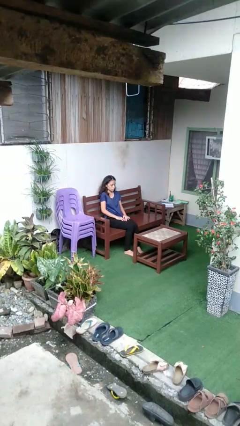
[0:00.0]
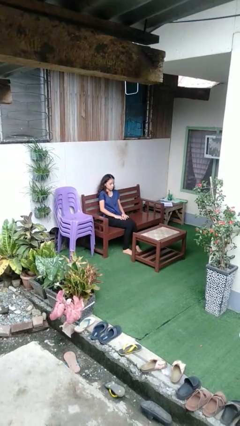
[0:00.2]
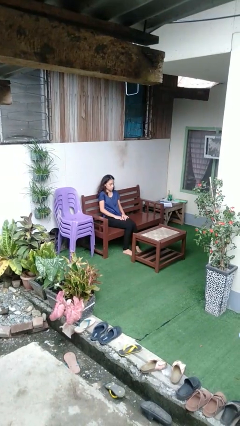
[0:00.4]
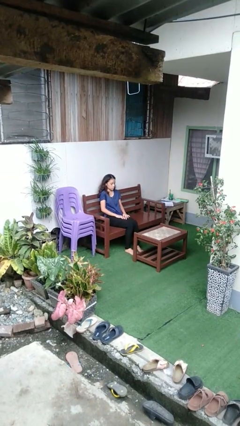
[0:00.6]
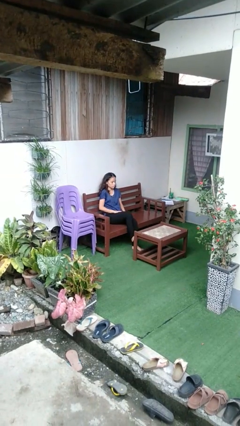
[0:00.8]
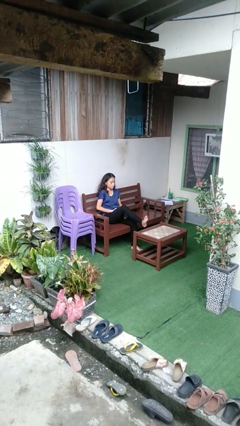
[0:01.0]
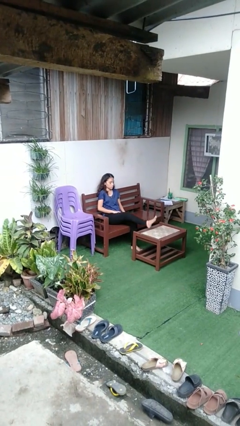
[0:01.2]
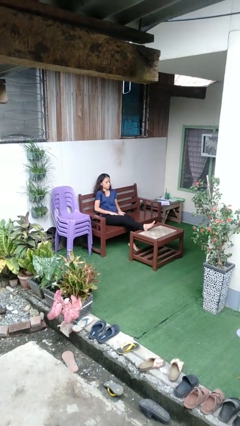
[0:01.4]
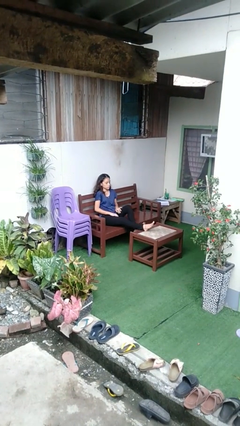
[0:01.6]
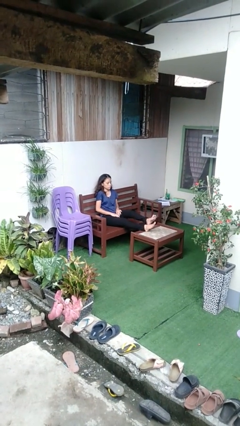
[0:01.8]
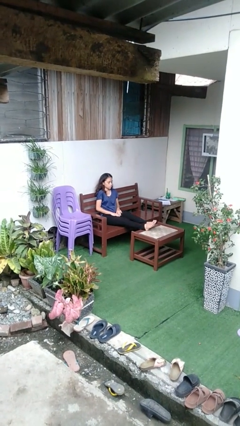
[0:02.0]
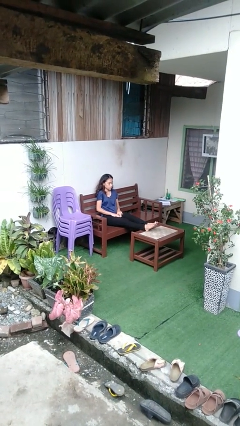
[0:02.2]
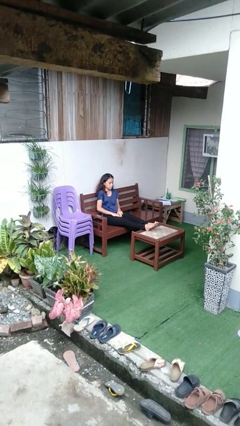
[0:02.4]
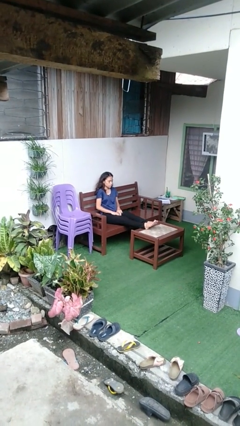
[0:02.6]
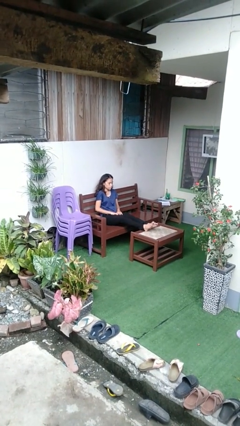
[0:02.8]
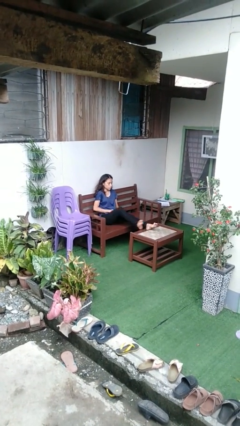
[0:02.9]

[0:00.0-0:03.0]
person puts feet up

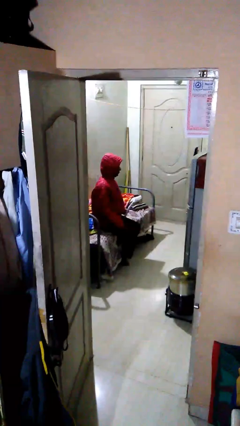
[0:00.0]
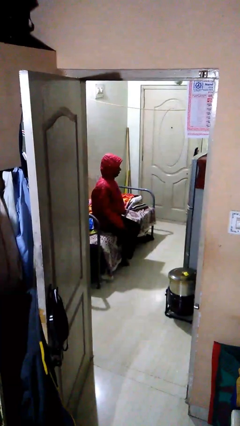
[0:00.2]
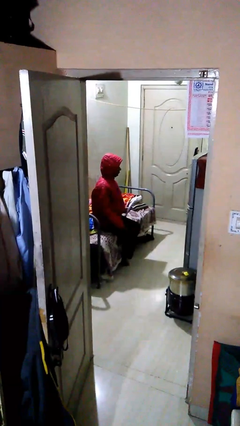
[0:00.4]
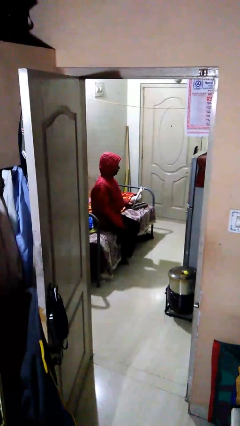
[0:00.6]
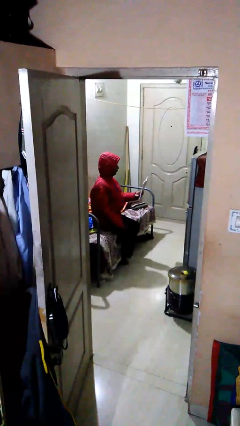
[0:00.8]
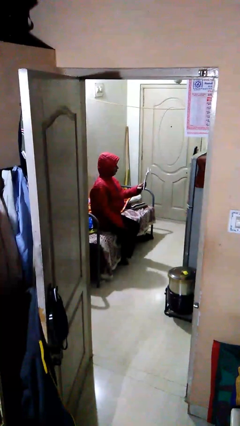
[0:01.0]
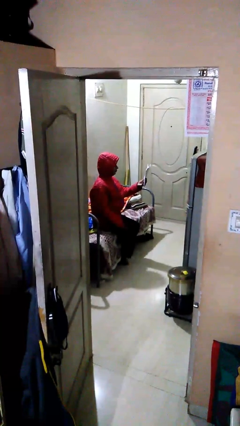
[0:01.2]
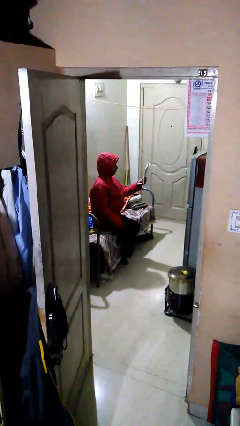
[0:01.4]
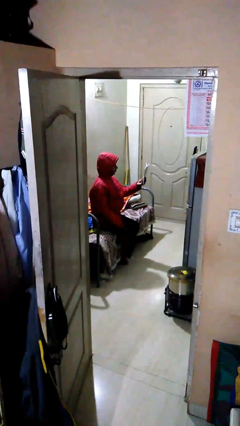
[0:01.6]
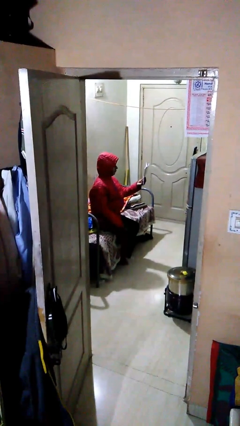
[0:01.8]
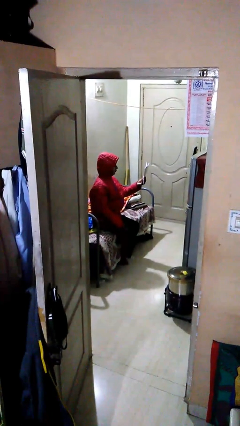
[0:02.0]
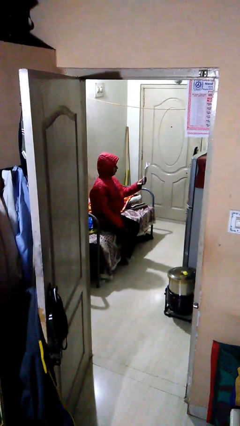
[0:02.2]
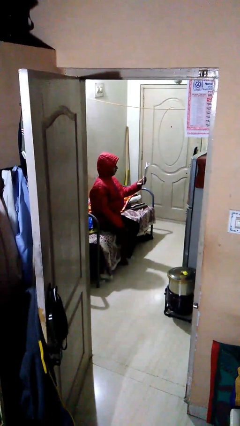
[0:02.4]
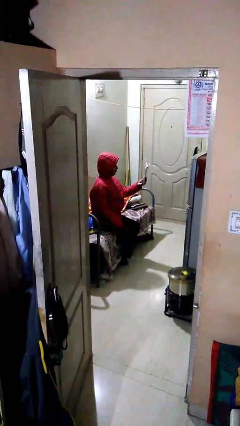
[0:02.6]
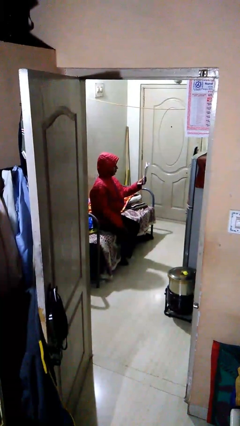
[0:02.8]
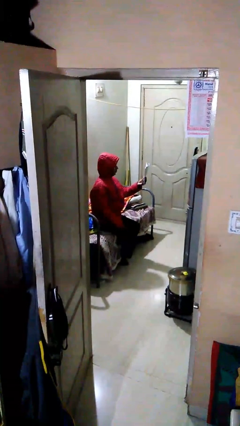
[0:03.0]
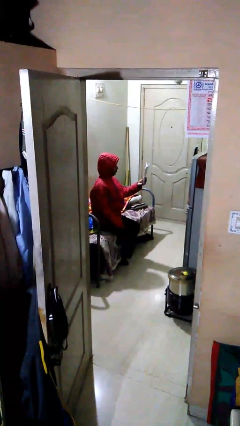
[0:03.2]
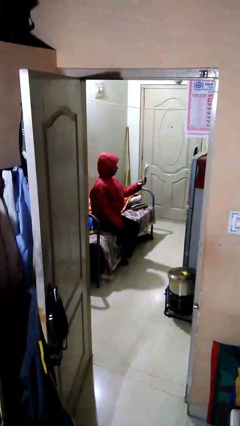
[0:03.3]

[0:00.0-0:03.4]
person reads document

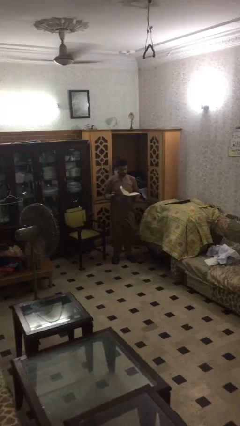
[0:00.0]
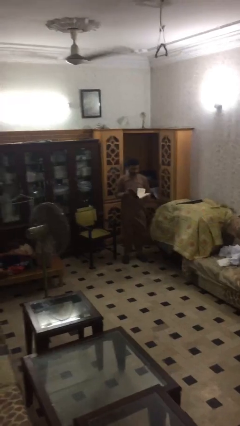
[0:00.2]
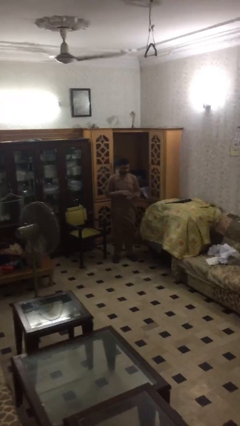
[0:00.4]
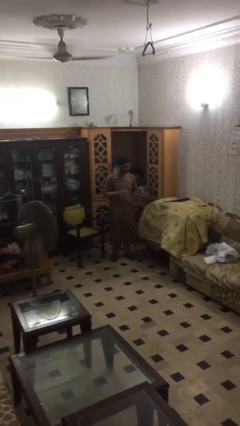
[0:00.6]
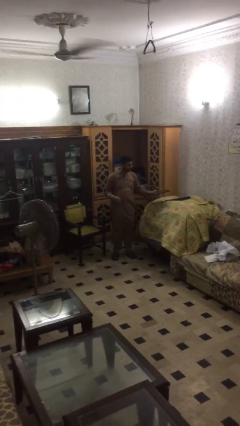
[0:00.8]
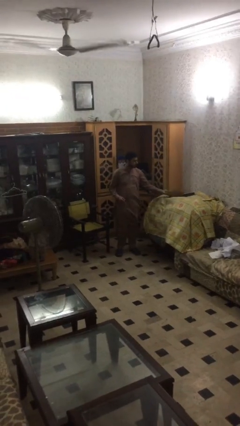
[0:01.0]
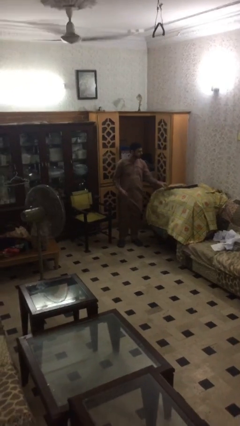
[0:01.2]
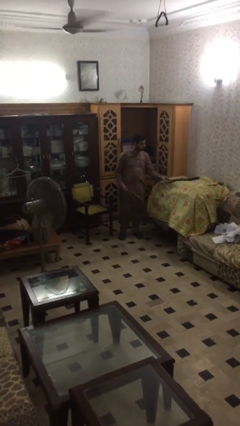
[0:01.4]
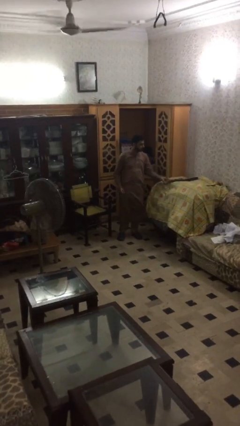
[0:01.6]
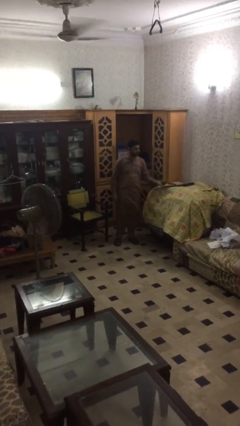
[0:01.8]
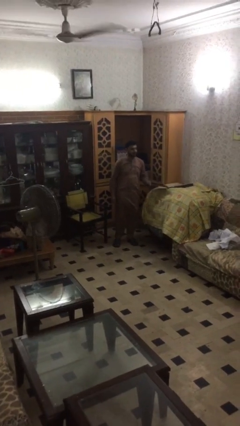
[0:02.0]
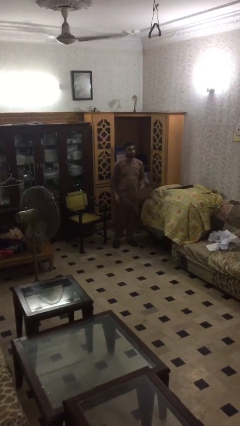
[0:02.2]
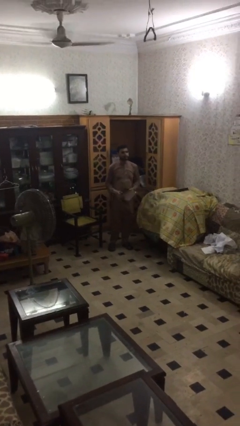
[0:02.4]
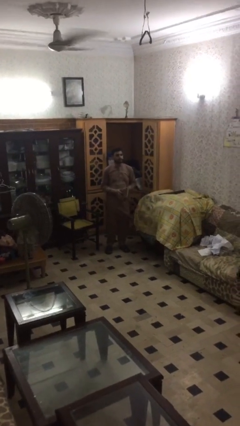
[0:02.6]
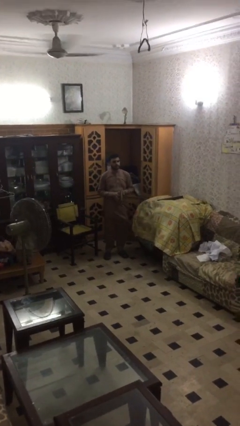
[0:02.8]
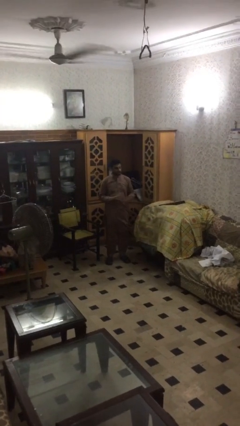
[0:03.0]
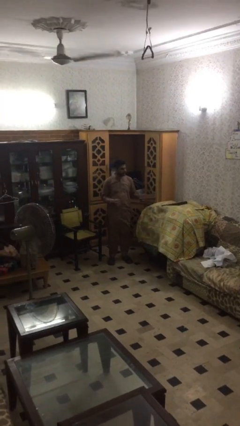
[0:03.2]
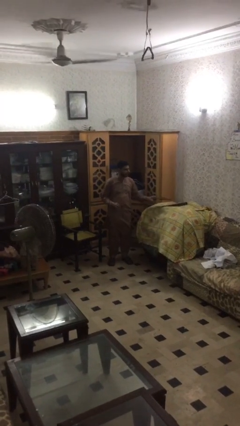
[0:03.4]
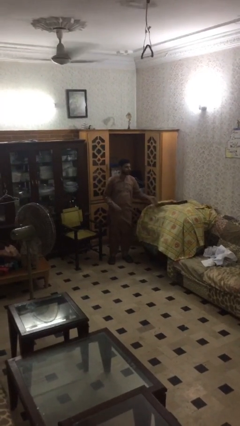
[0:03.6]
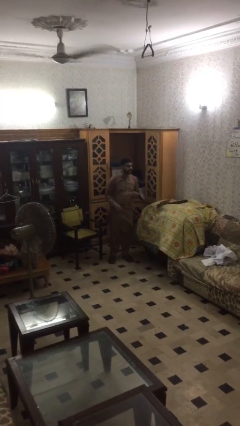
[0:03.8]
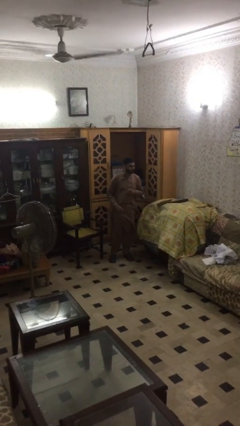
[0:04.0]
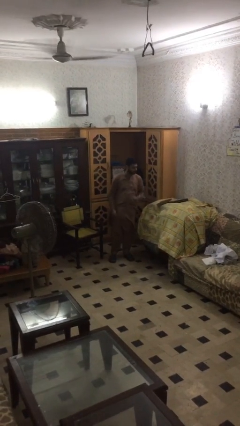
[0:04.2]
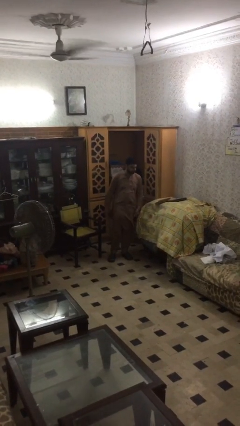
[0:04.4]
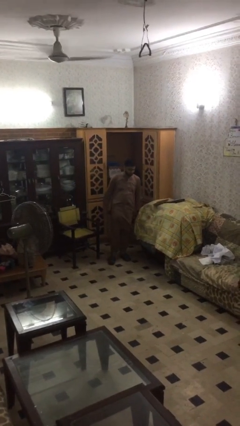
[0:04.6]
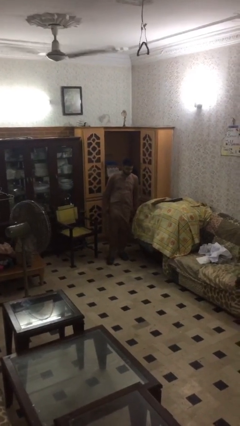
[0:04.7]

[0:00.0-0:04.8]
person puts down object on table

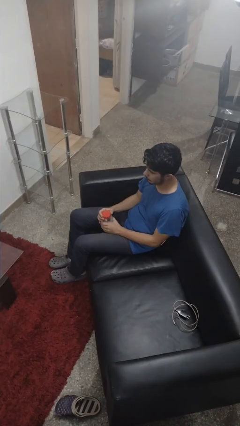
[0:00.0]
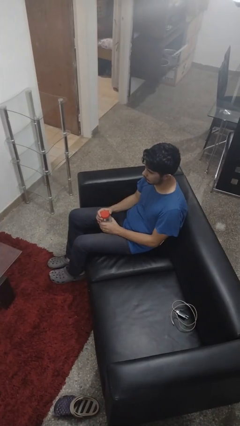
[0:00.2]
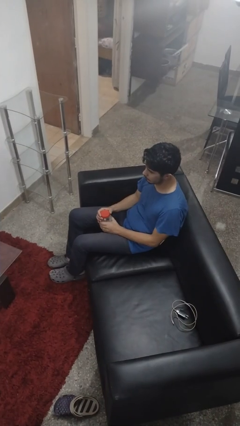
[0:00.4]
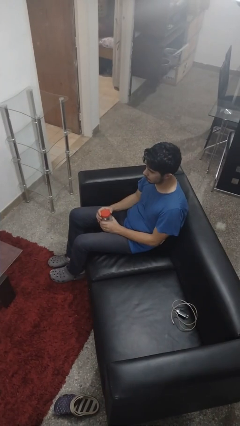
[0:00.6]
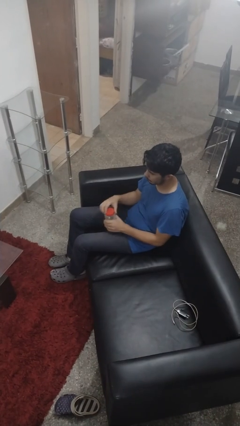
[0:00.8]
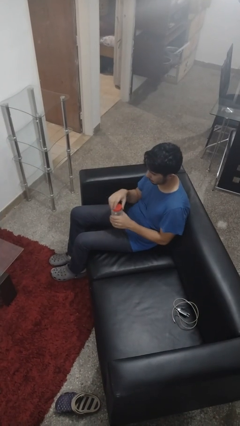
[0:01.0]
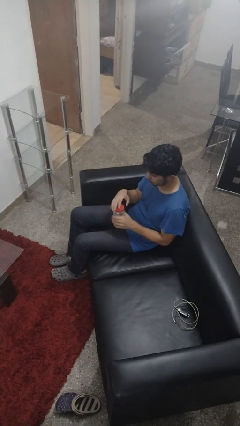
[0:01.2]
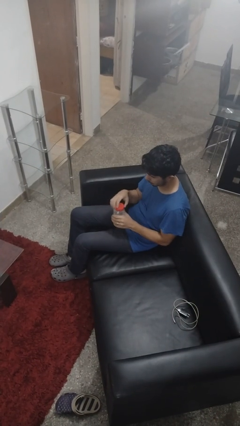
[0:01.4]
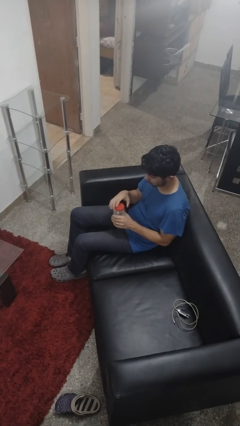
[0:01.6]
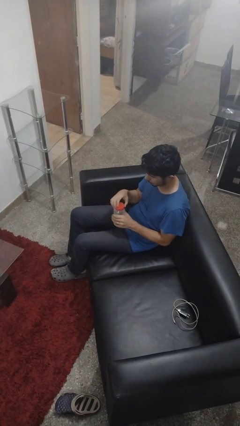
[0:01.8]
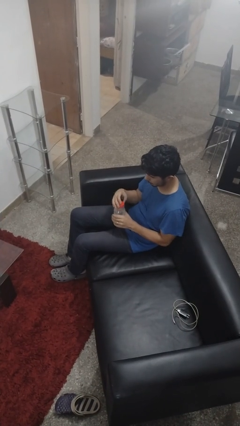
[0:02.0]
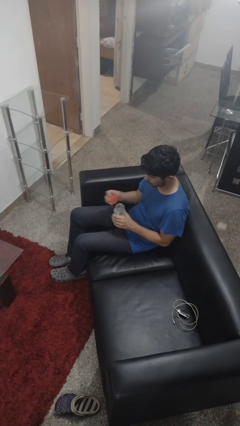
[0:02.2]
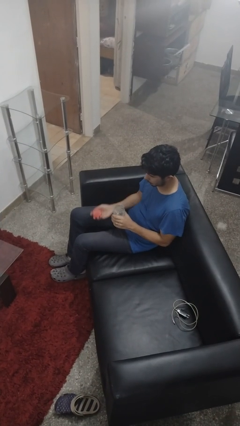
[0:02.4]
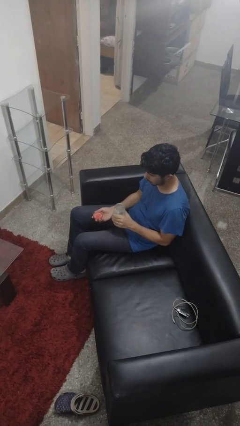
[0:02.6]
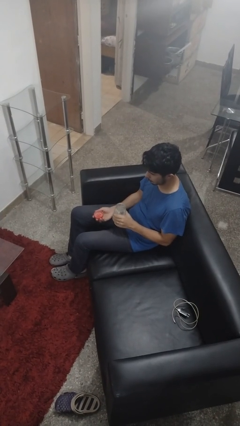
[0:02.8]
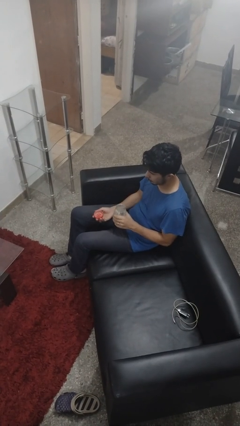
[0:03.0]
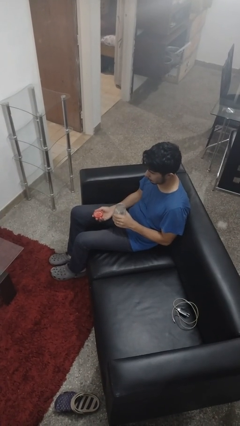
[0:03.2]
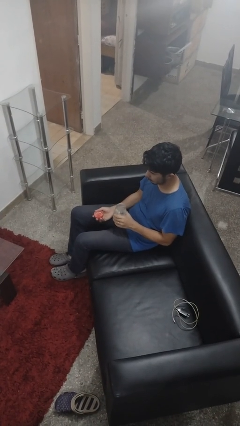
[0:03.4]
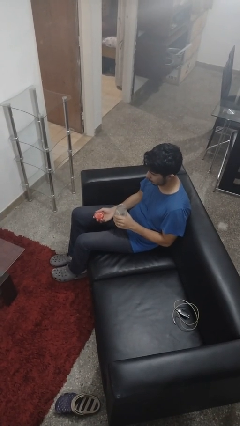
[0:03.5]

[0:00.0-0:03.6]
person opens jar

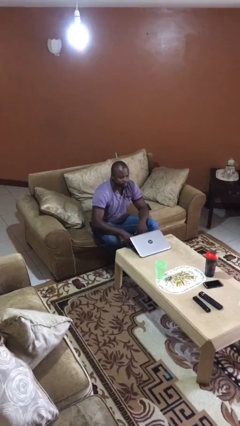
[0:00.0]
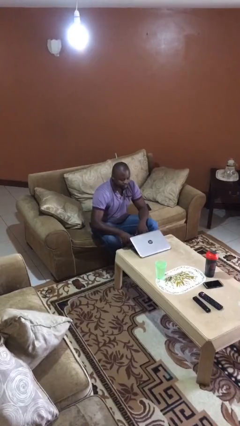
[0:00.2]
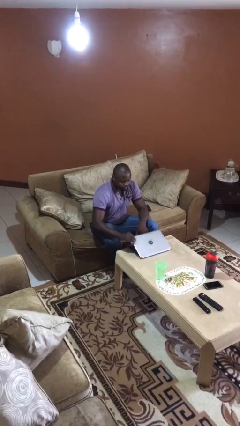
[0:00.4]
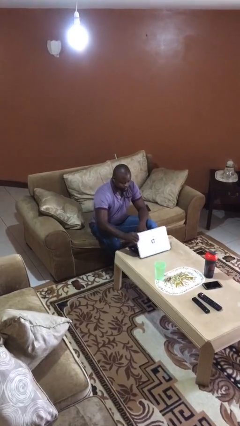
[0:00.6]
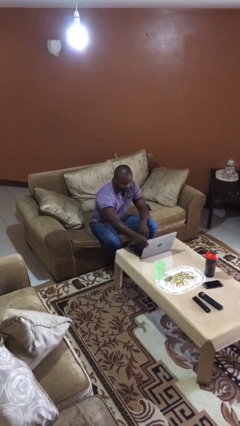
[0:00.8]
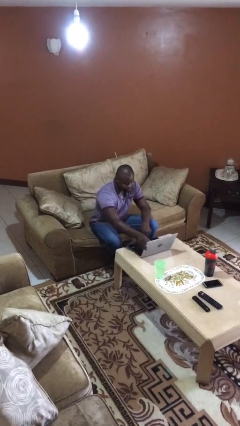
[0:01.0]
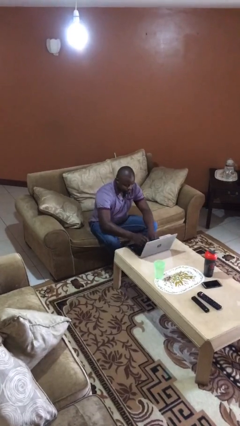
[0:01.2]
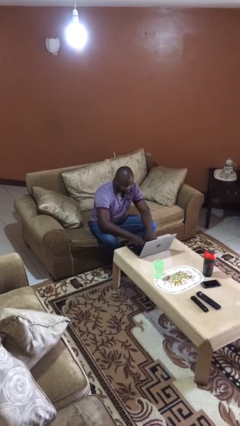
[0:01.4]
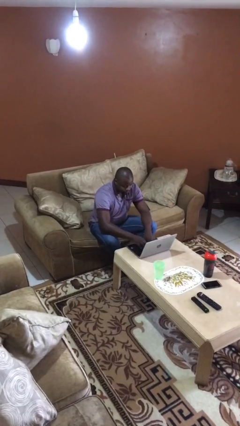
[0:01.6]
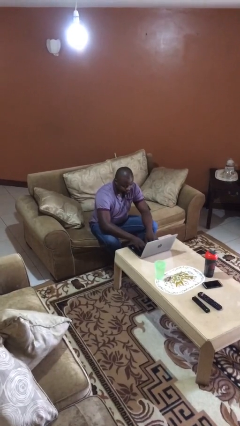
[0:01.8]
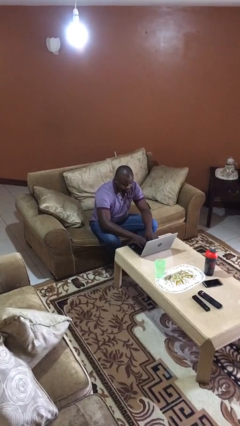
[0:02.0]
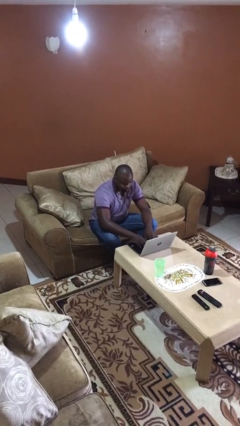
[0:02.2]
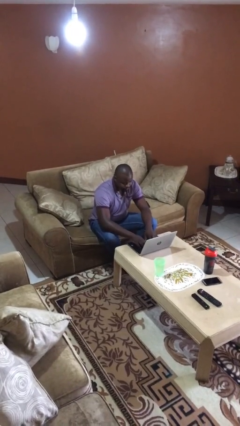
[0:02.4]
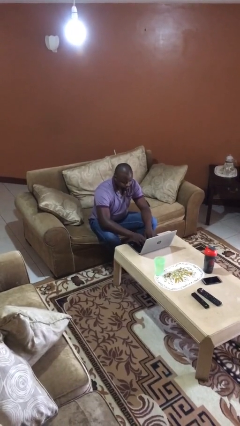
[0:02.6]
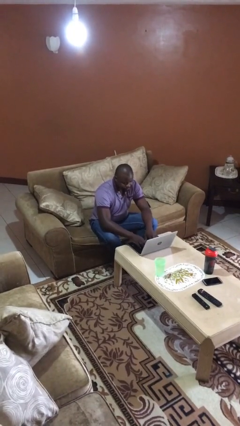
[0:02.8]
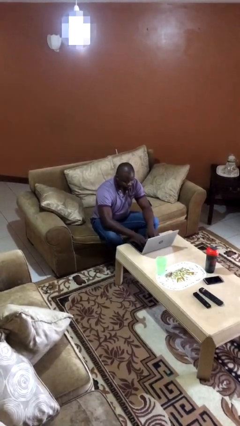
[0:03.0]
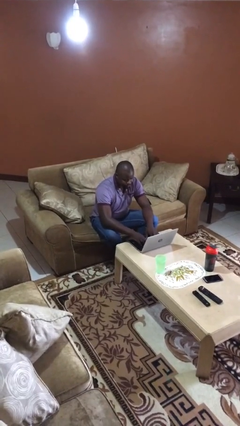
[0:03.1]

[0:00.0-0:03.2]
person interacts with laptop
